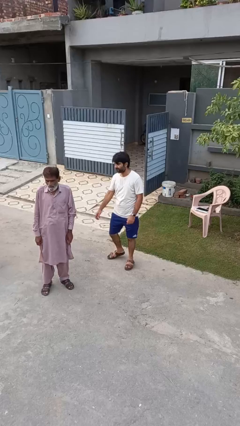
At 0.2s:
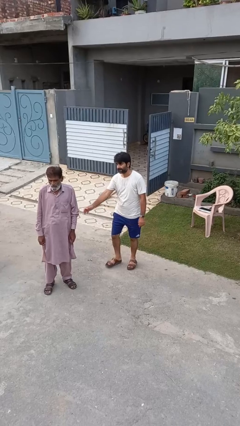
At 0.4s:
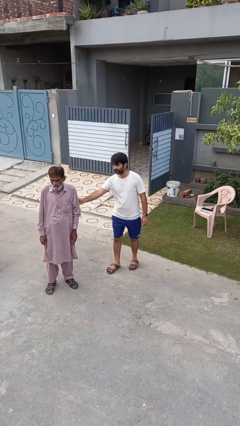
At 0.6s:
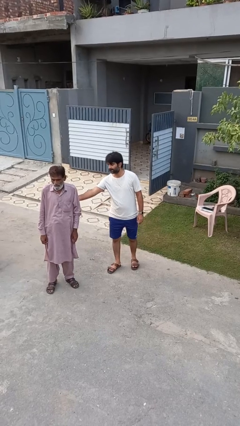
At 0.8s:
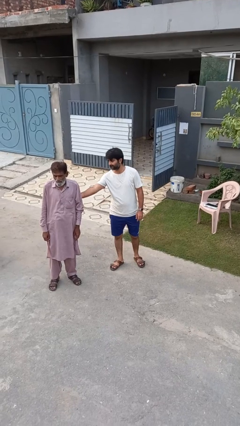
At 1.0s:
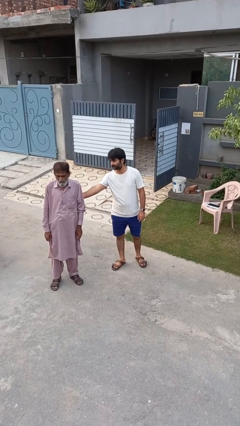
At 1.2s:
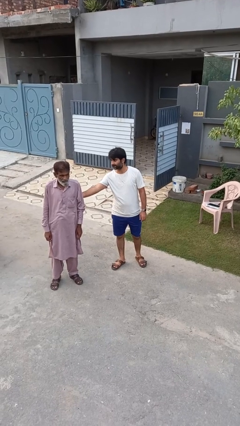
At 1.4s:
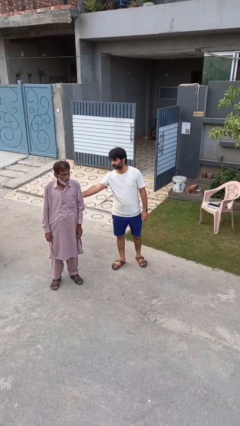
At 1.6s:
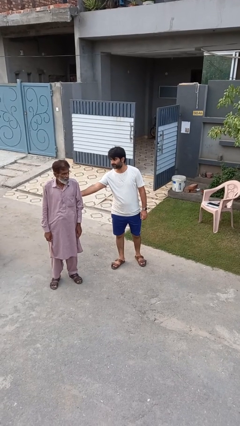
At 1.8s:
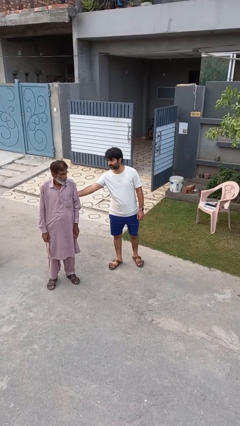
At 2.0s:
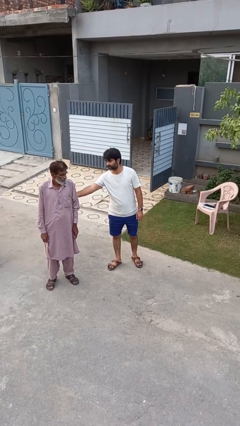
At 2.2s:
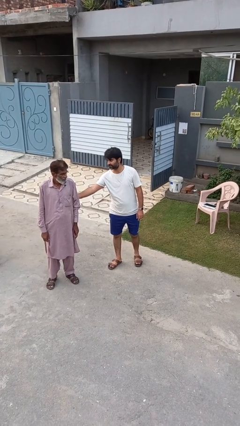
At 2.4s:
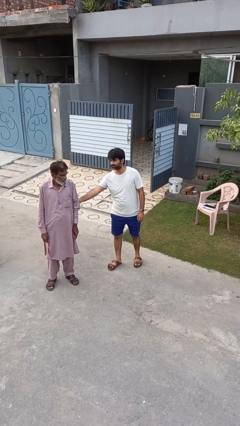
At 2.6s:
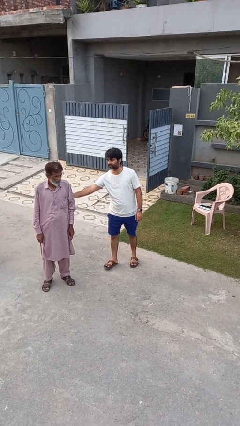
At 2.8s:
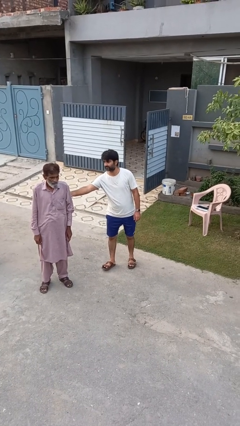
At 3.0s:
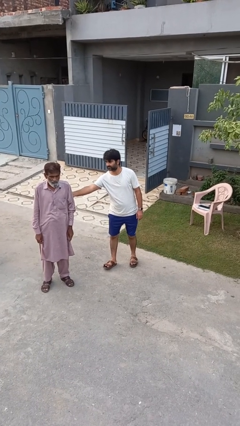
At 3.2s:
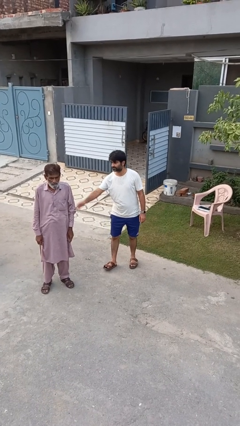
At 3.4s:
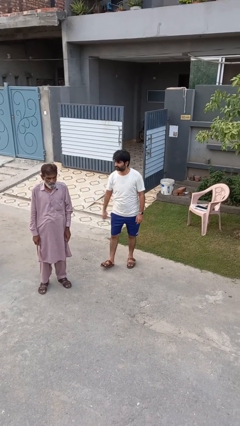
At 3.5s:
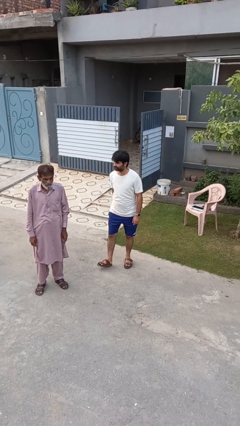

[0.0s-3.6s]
person touches back of person

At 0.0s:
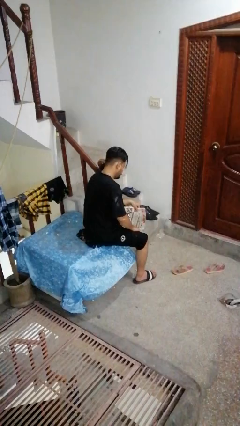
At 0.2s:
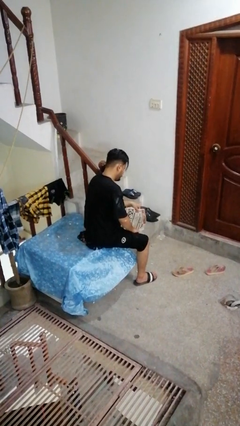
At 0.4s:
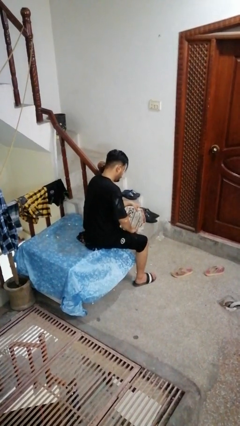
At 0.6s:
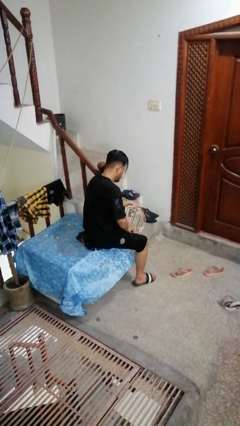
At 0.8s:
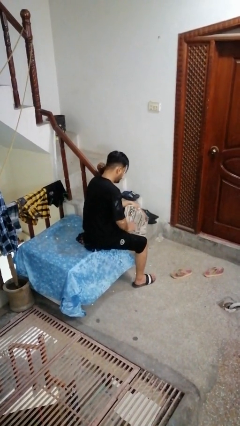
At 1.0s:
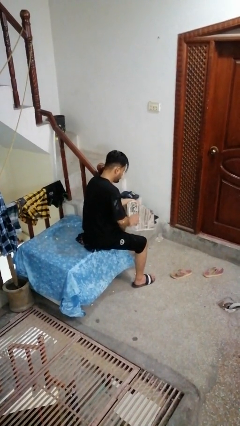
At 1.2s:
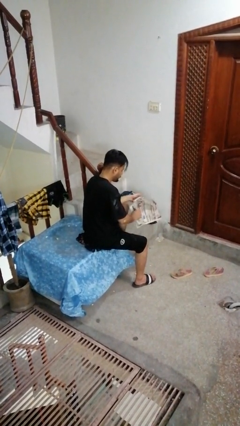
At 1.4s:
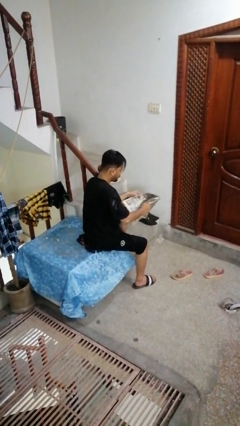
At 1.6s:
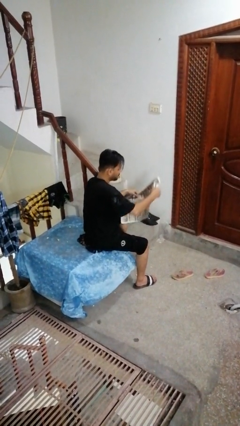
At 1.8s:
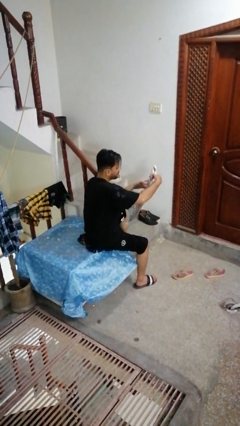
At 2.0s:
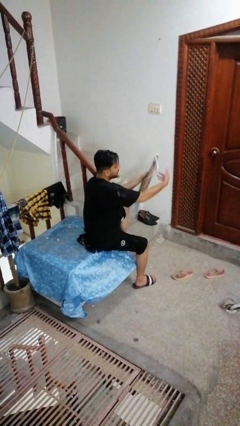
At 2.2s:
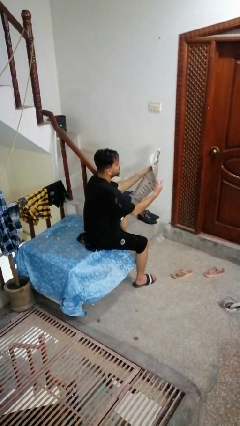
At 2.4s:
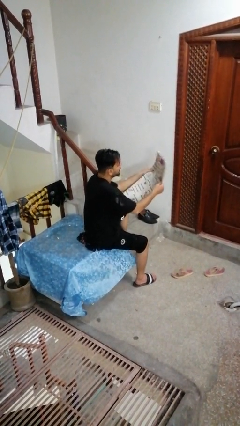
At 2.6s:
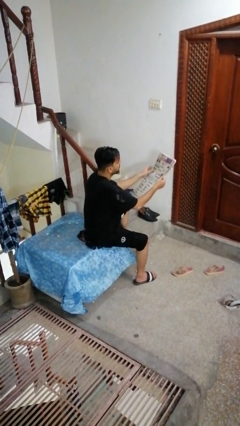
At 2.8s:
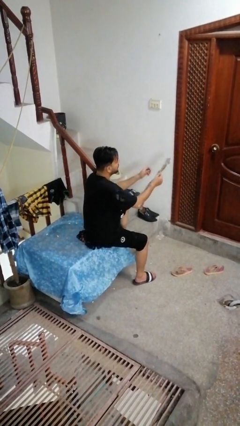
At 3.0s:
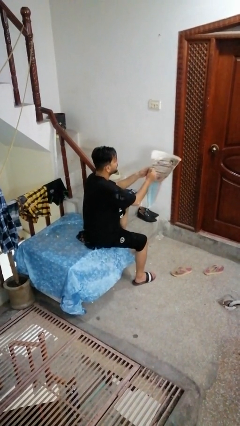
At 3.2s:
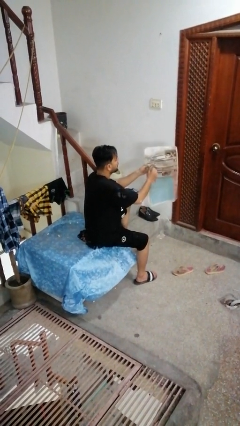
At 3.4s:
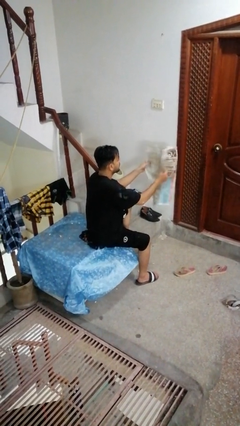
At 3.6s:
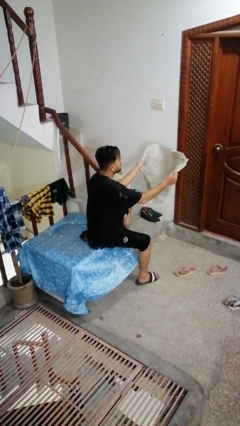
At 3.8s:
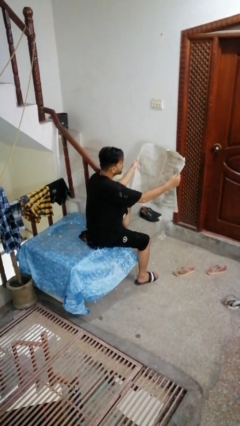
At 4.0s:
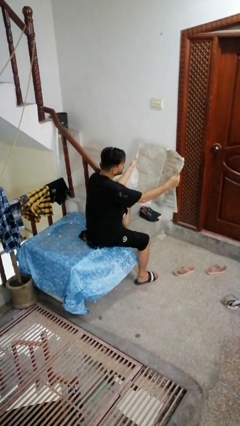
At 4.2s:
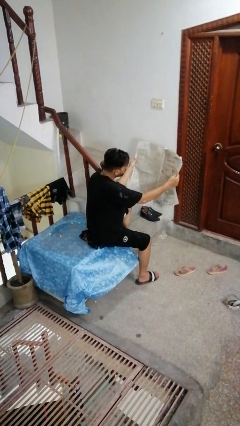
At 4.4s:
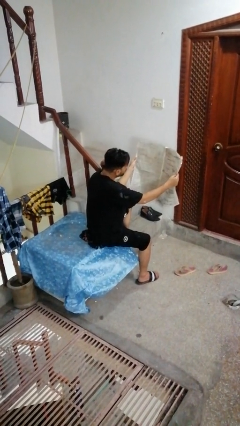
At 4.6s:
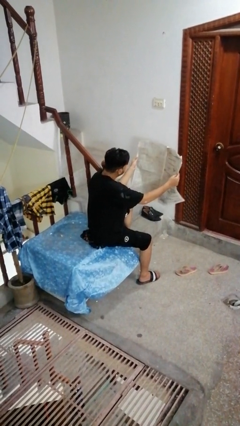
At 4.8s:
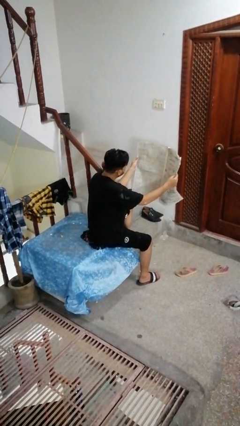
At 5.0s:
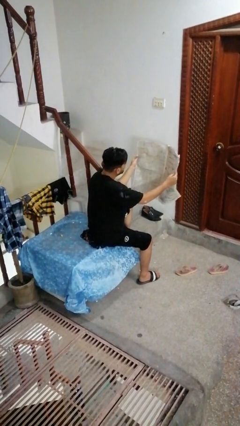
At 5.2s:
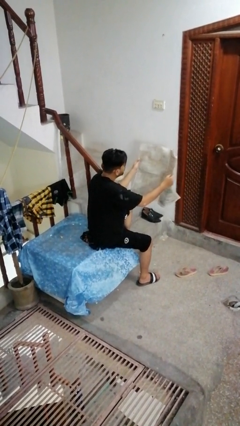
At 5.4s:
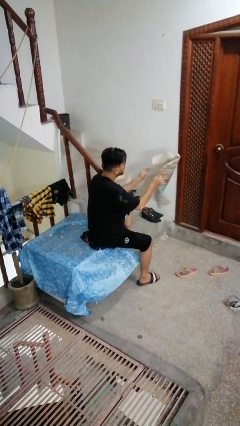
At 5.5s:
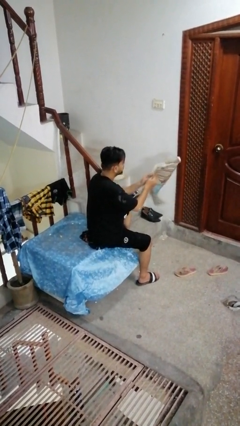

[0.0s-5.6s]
person reads newspaper

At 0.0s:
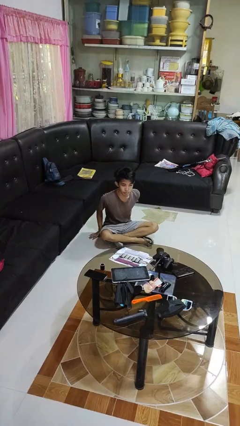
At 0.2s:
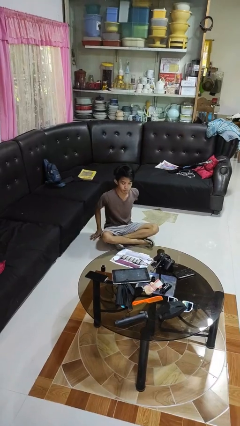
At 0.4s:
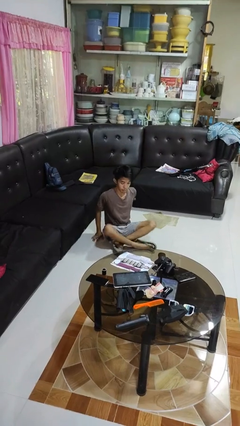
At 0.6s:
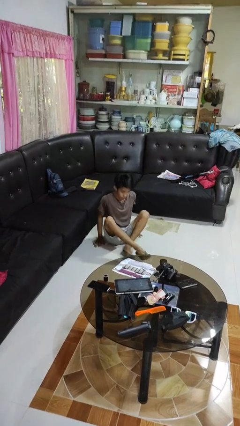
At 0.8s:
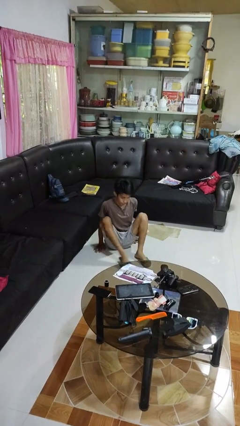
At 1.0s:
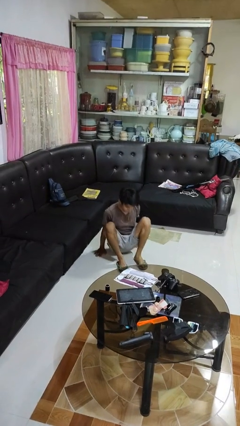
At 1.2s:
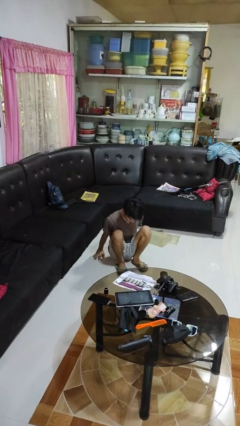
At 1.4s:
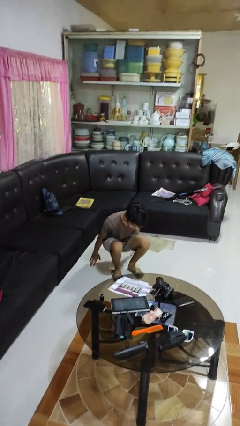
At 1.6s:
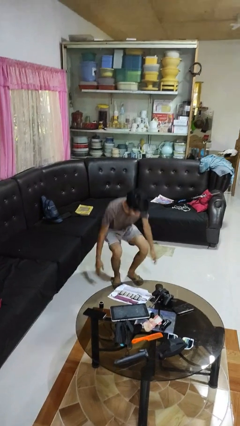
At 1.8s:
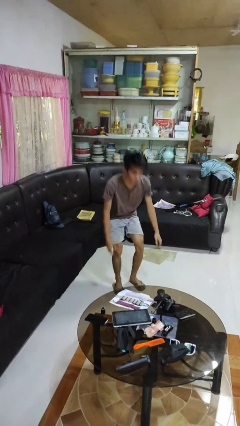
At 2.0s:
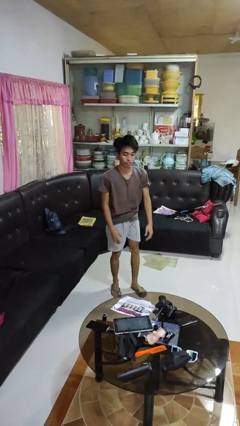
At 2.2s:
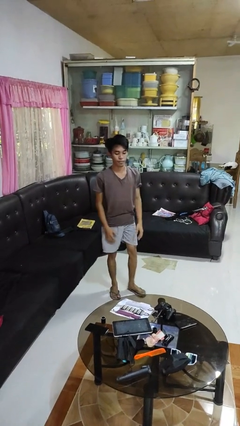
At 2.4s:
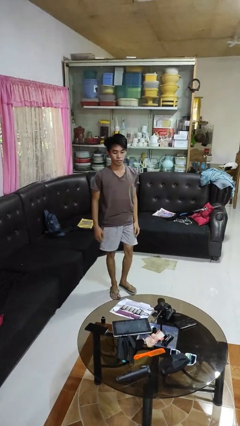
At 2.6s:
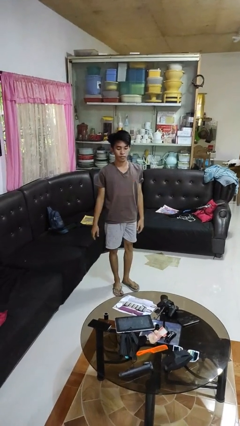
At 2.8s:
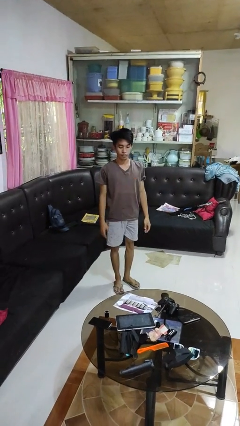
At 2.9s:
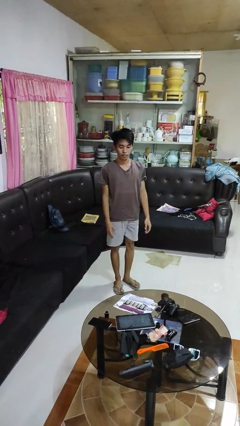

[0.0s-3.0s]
person stands up from floor

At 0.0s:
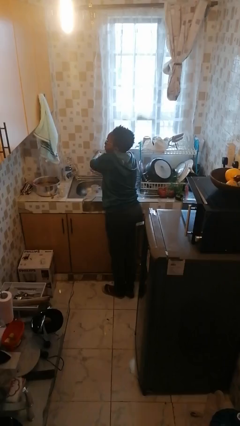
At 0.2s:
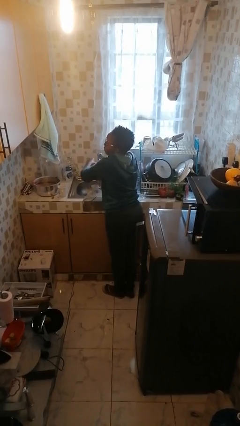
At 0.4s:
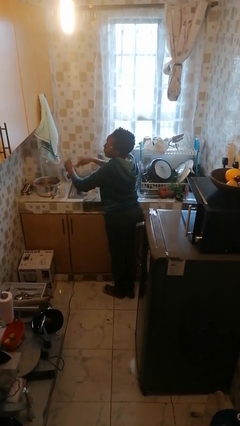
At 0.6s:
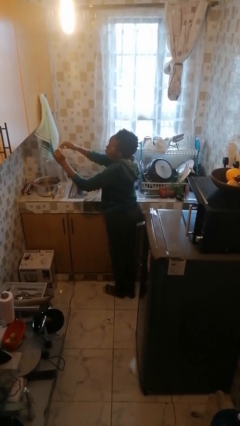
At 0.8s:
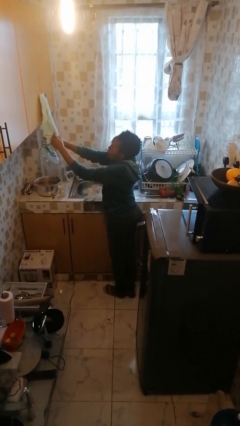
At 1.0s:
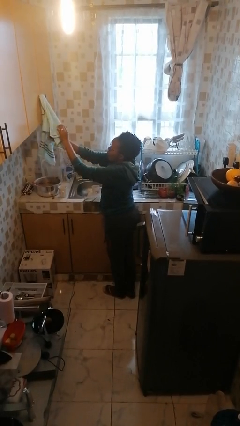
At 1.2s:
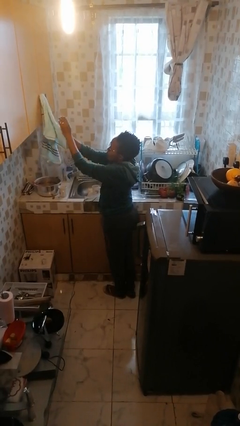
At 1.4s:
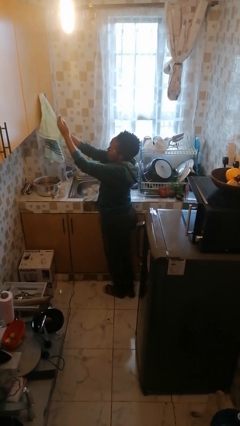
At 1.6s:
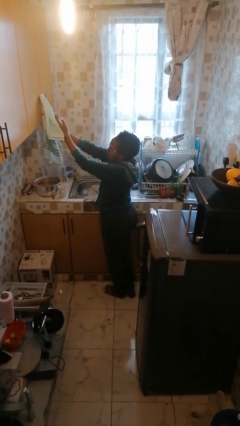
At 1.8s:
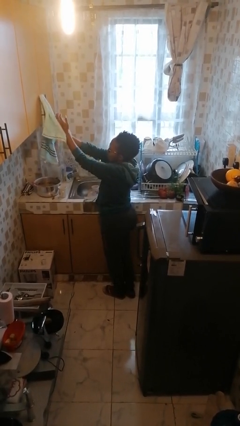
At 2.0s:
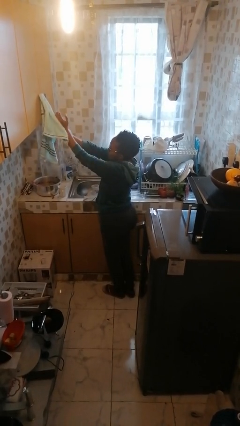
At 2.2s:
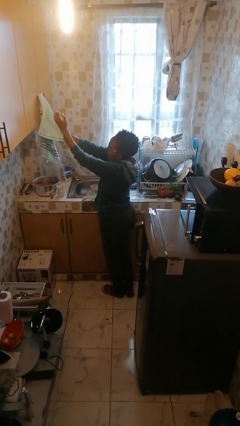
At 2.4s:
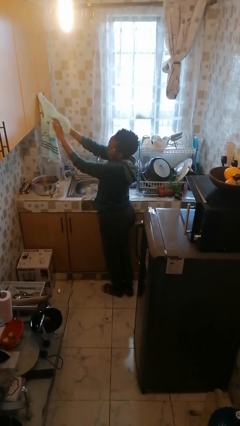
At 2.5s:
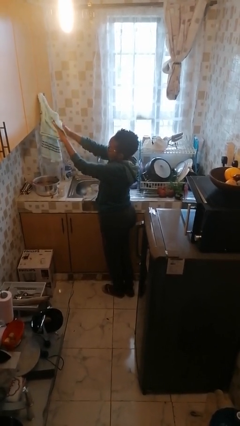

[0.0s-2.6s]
person dries hands with towel

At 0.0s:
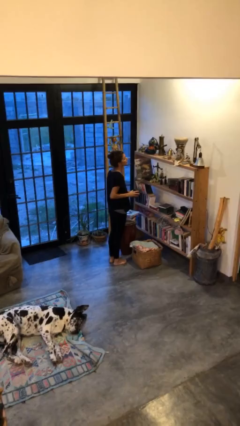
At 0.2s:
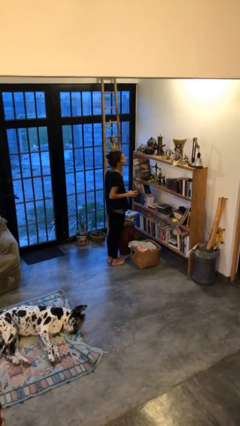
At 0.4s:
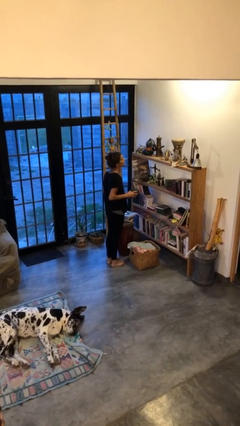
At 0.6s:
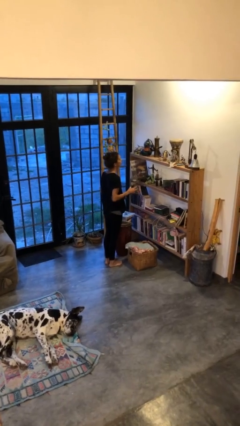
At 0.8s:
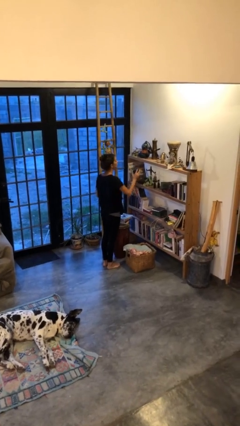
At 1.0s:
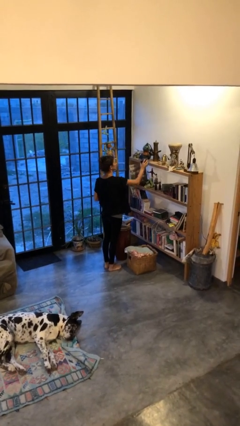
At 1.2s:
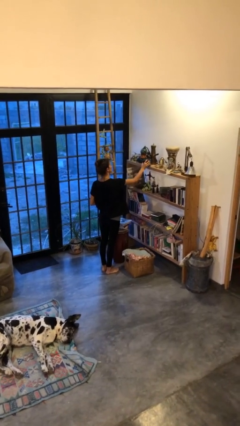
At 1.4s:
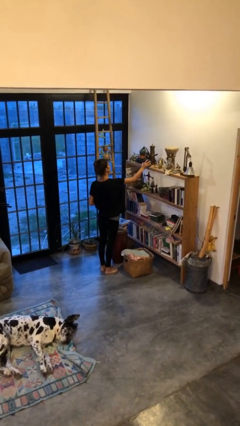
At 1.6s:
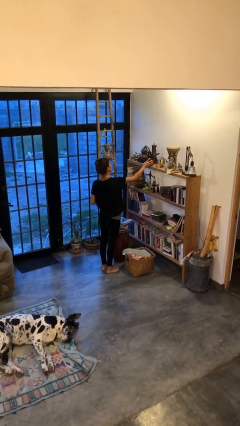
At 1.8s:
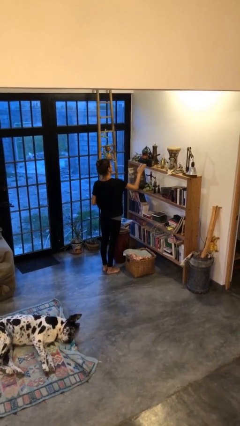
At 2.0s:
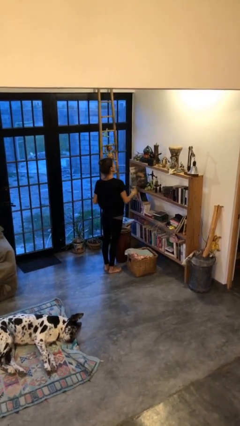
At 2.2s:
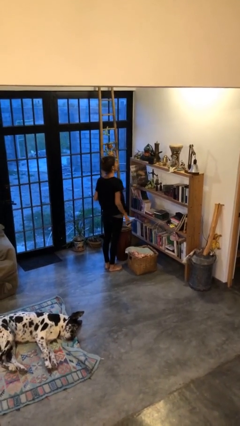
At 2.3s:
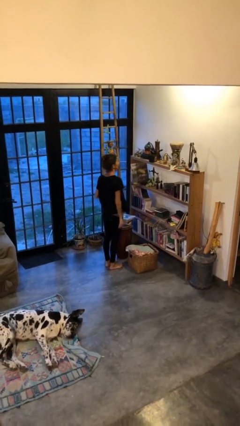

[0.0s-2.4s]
person puts down object on countertop

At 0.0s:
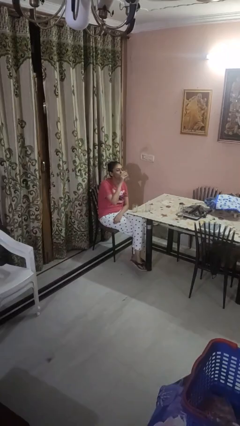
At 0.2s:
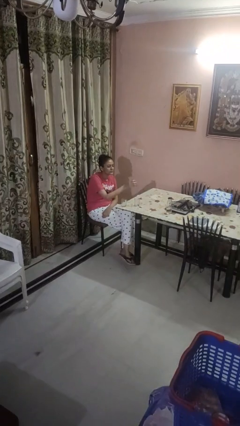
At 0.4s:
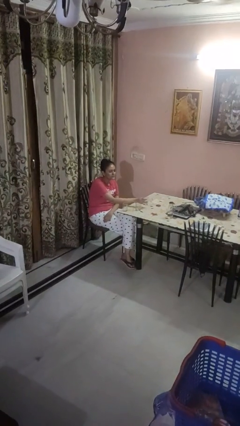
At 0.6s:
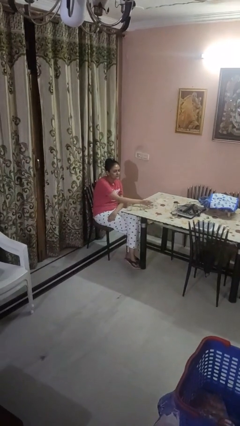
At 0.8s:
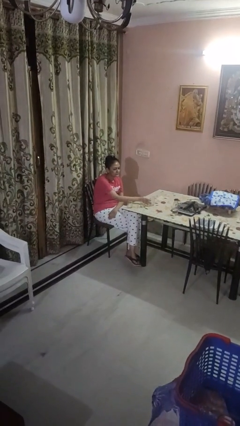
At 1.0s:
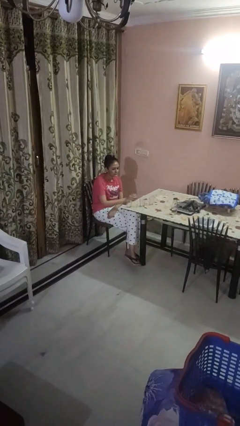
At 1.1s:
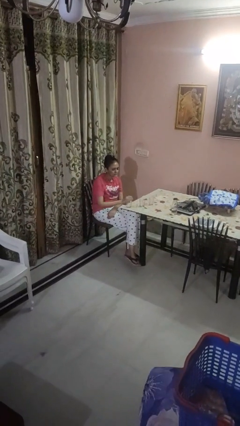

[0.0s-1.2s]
person puts down object on table
